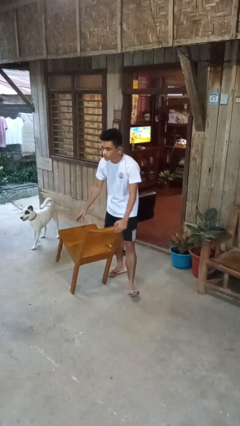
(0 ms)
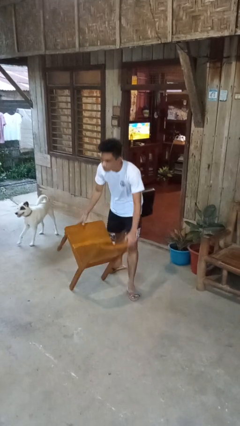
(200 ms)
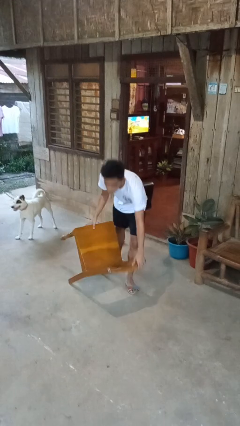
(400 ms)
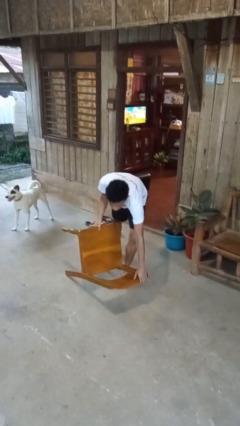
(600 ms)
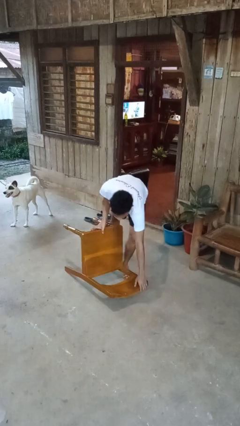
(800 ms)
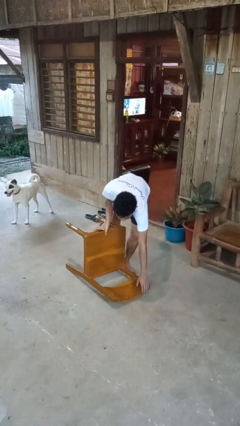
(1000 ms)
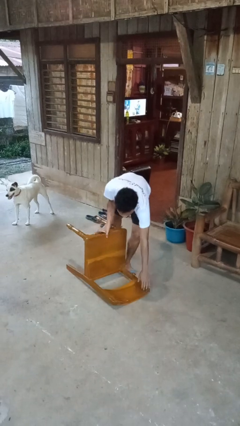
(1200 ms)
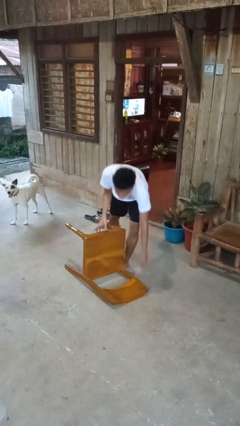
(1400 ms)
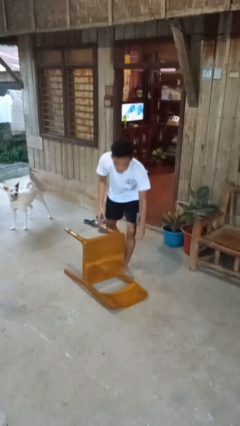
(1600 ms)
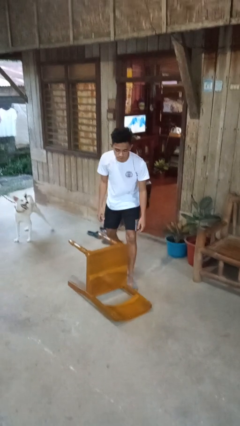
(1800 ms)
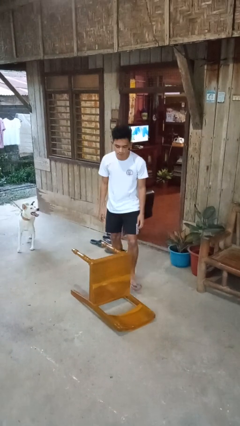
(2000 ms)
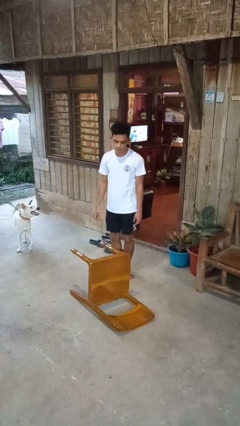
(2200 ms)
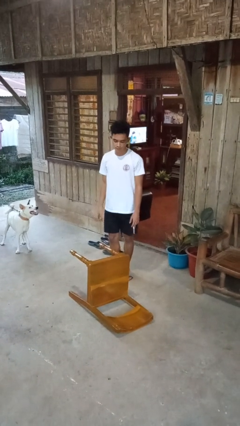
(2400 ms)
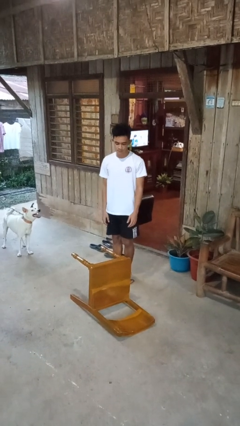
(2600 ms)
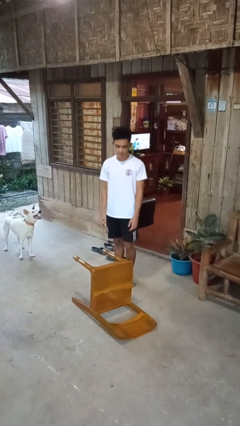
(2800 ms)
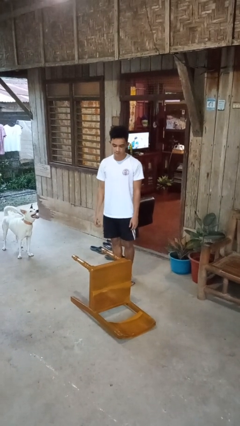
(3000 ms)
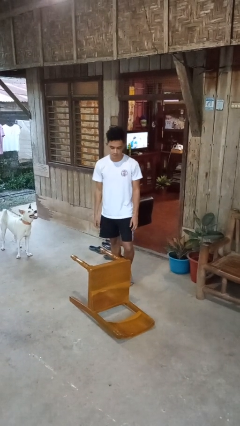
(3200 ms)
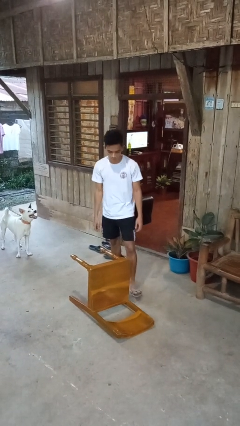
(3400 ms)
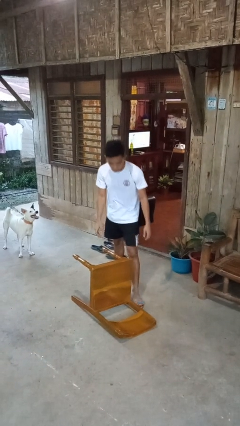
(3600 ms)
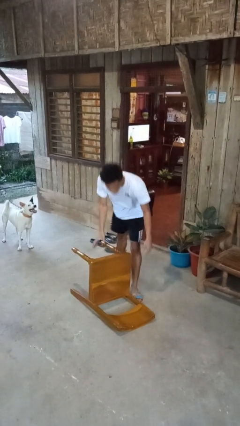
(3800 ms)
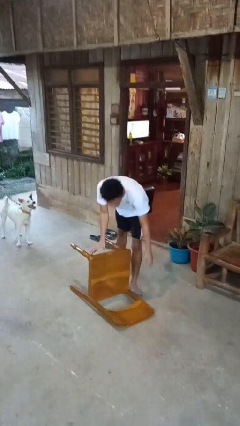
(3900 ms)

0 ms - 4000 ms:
person knocks over furniture

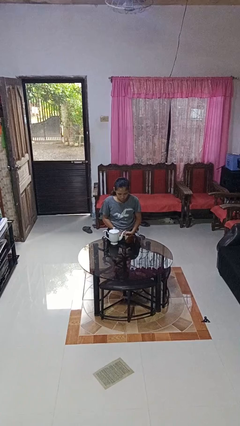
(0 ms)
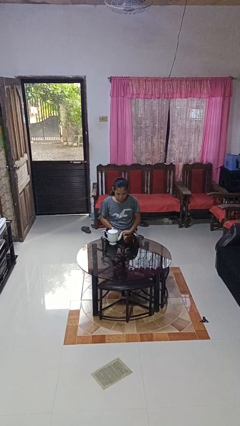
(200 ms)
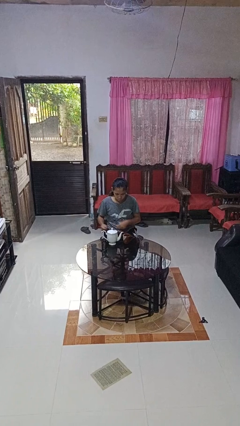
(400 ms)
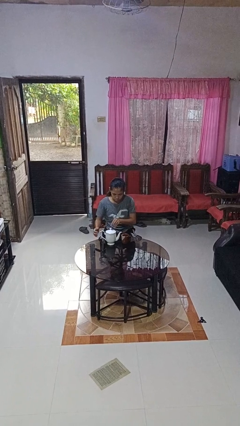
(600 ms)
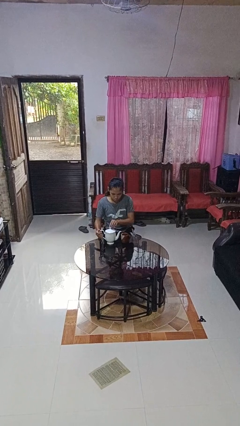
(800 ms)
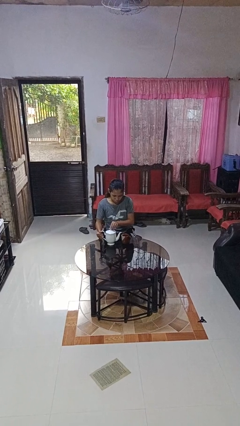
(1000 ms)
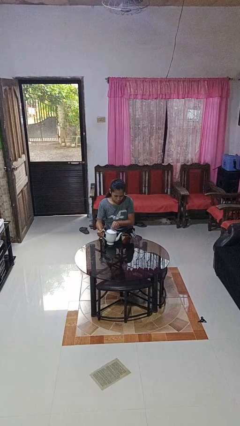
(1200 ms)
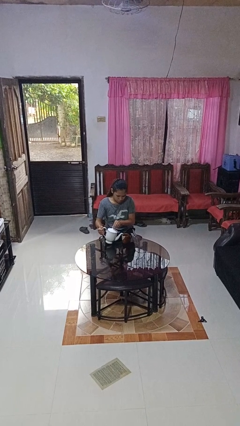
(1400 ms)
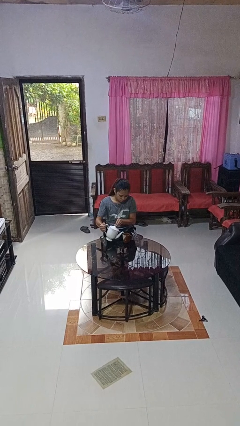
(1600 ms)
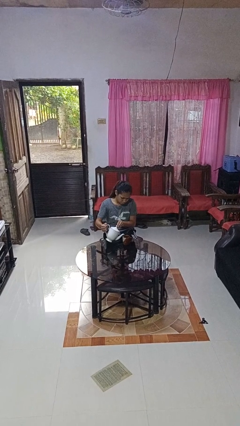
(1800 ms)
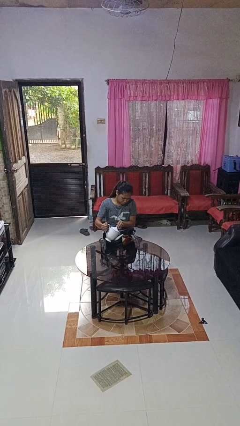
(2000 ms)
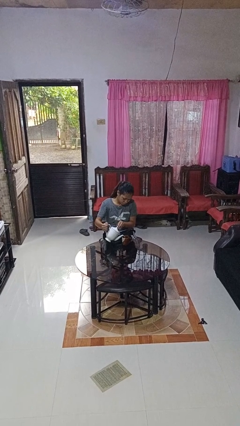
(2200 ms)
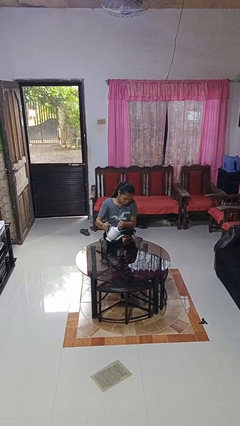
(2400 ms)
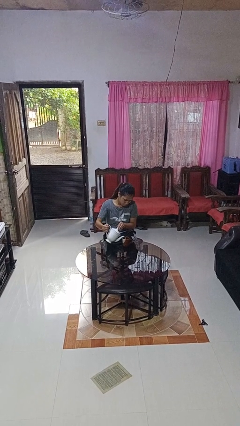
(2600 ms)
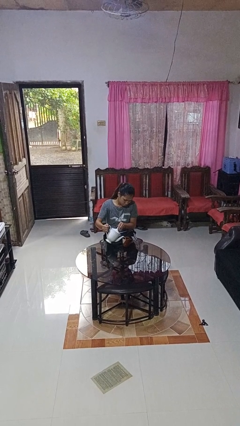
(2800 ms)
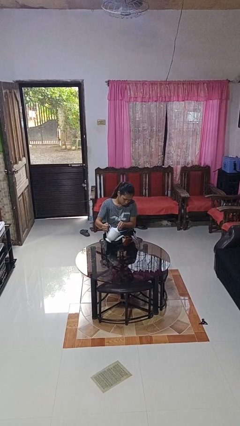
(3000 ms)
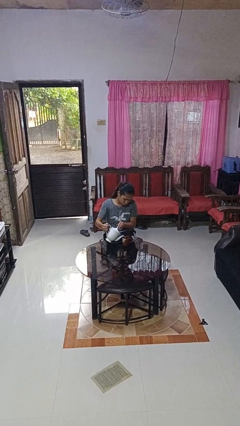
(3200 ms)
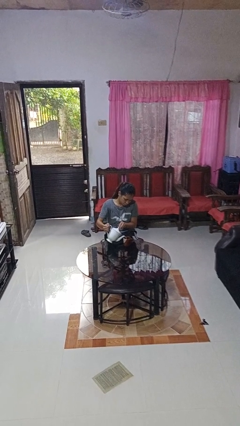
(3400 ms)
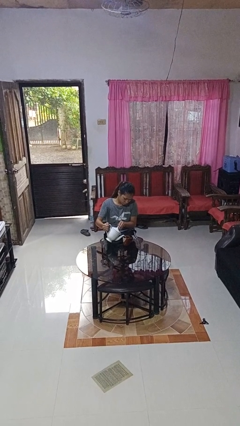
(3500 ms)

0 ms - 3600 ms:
person pours coffee into mug

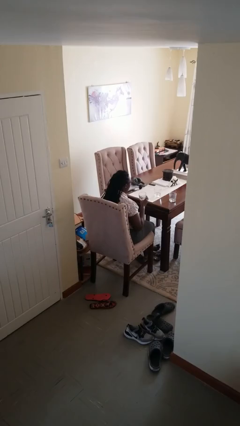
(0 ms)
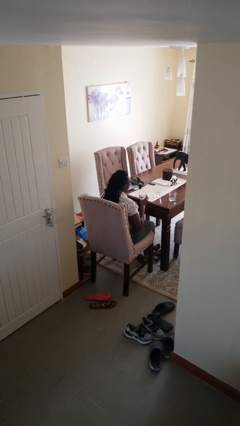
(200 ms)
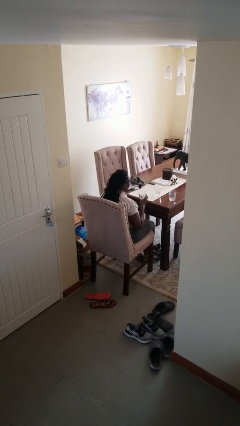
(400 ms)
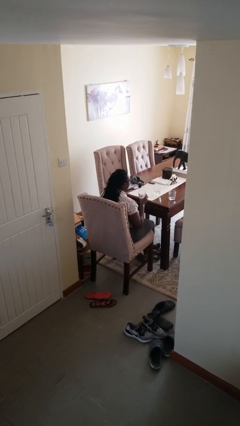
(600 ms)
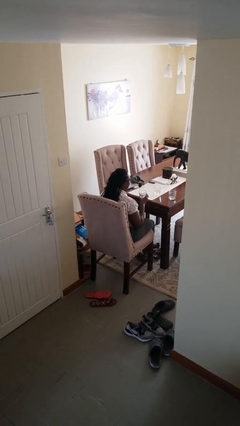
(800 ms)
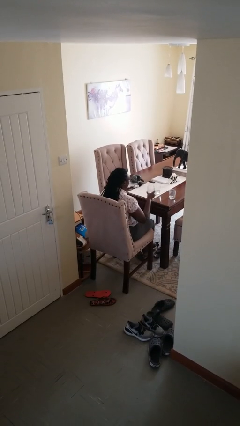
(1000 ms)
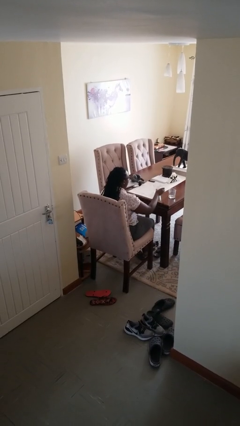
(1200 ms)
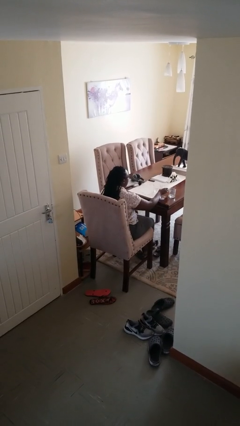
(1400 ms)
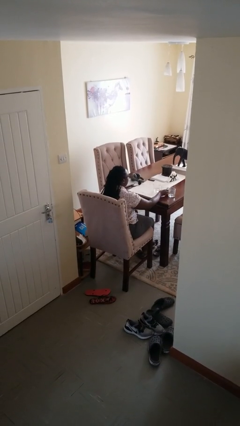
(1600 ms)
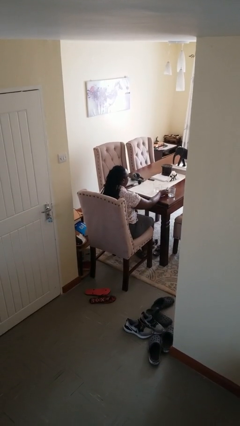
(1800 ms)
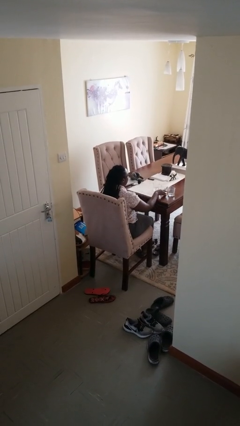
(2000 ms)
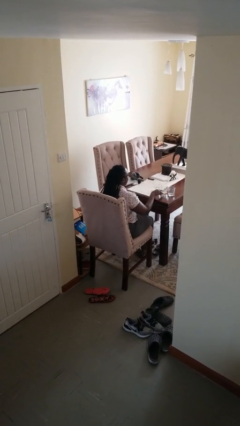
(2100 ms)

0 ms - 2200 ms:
person puts down object on table

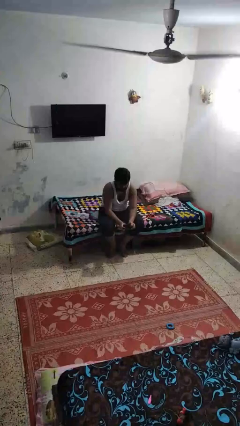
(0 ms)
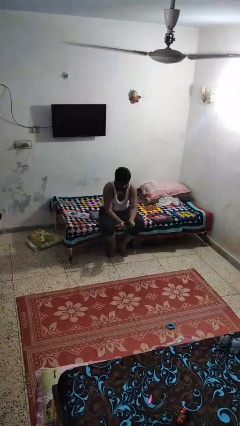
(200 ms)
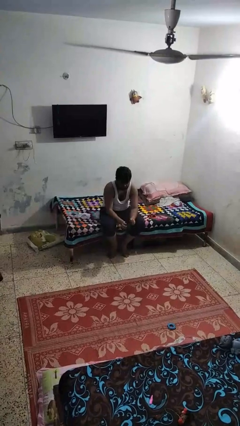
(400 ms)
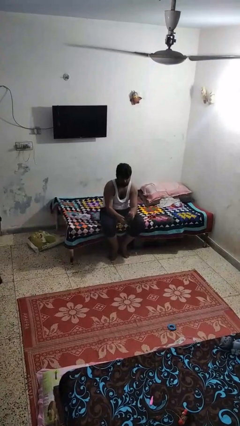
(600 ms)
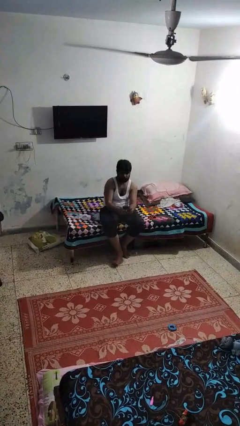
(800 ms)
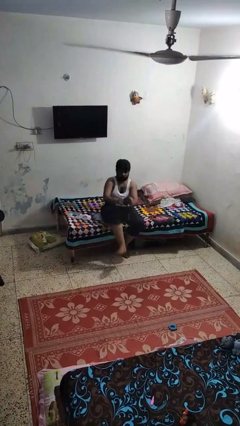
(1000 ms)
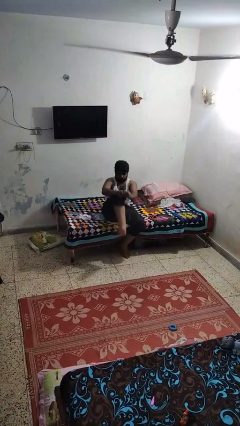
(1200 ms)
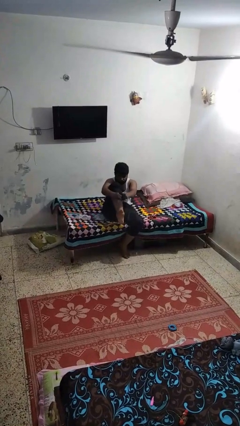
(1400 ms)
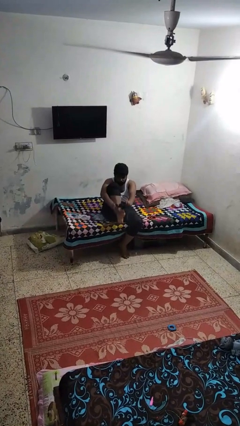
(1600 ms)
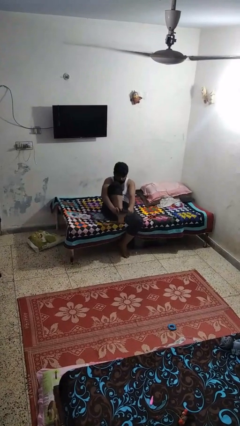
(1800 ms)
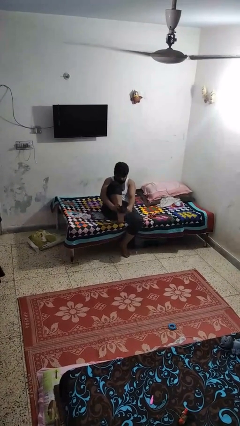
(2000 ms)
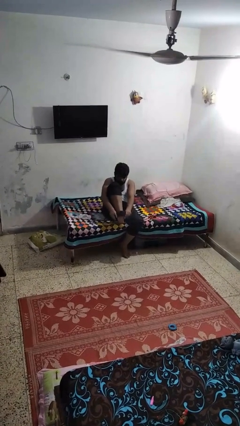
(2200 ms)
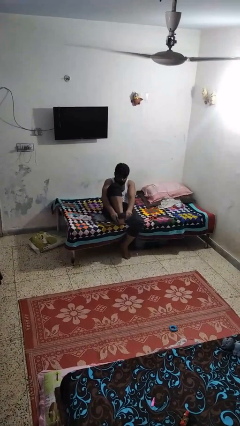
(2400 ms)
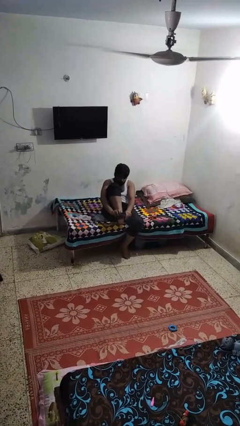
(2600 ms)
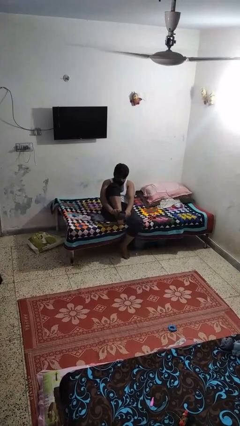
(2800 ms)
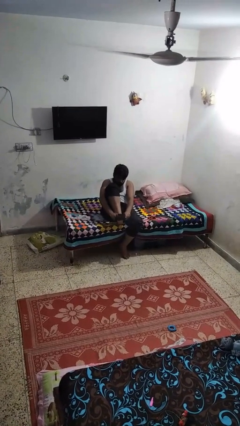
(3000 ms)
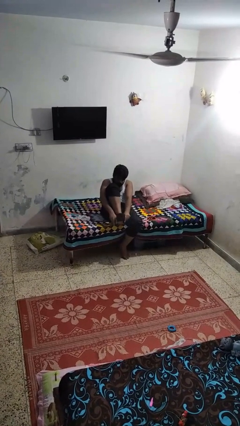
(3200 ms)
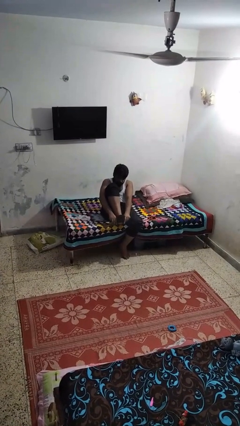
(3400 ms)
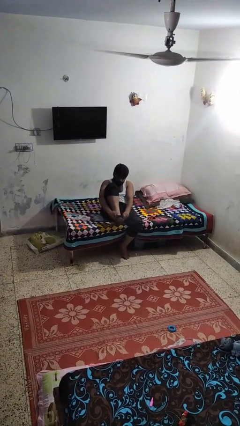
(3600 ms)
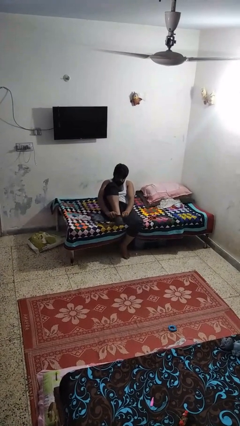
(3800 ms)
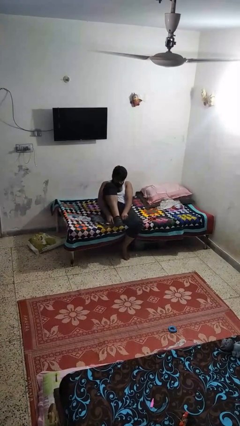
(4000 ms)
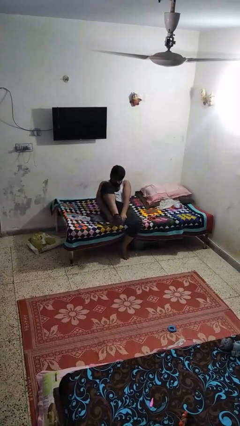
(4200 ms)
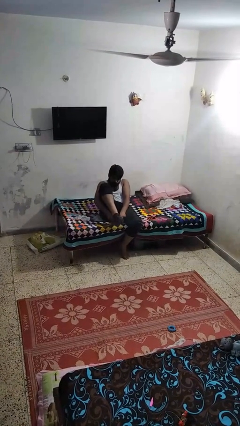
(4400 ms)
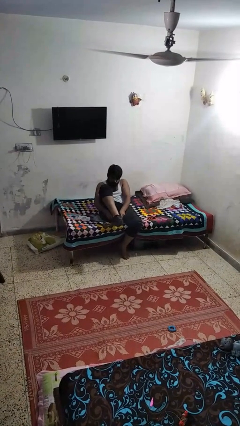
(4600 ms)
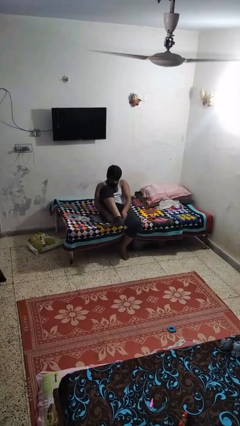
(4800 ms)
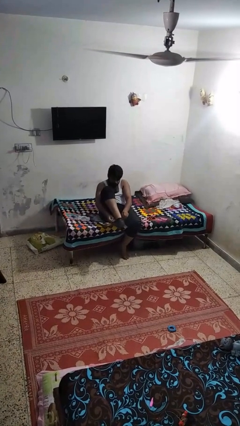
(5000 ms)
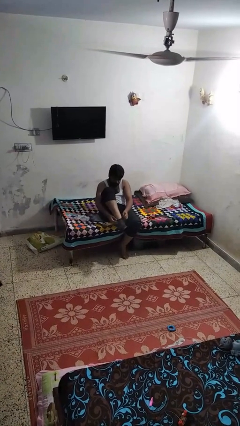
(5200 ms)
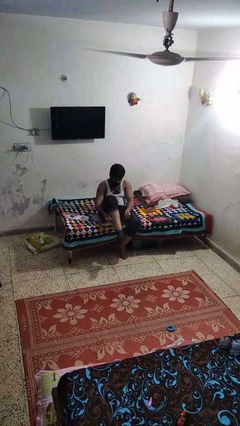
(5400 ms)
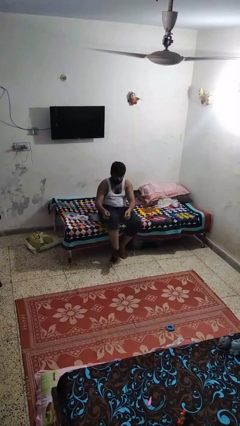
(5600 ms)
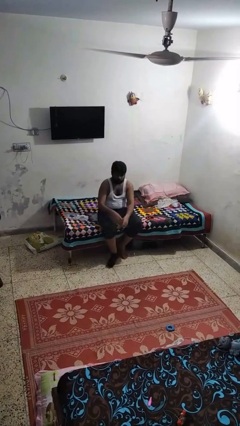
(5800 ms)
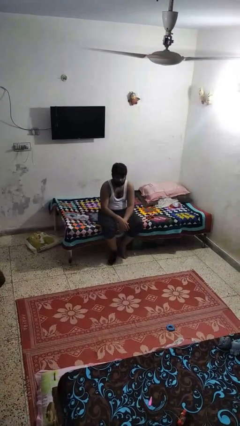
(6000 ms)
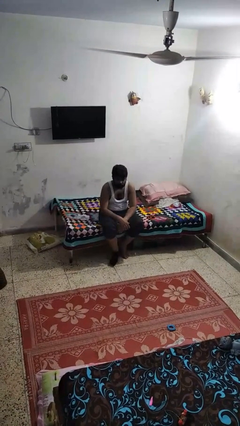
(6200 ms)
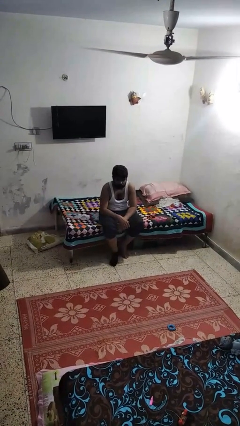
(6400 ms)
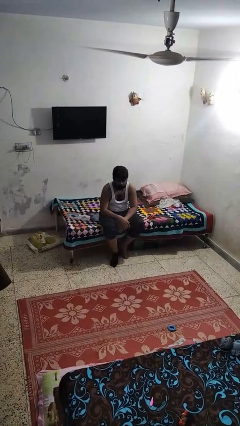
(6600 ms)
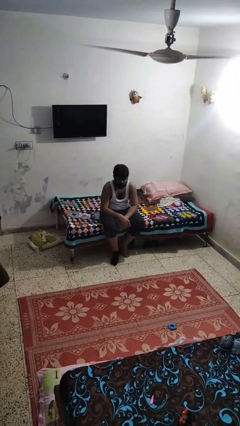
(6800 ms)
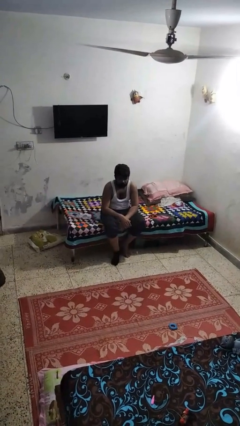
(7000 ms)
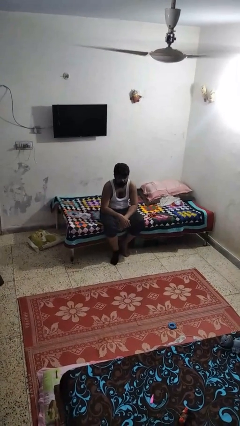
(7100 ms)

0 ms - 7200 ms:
person puts on socks

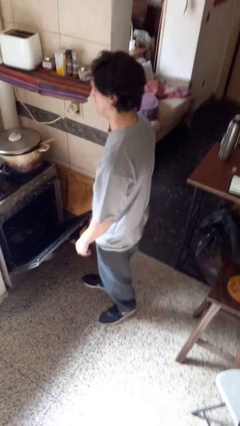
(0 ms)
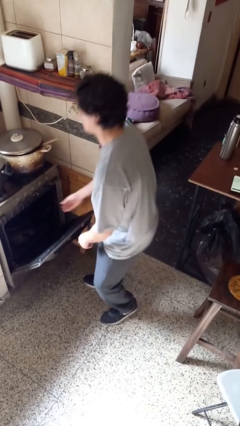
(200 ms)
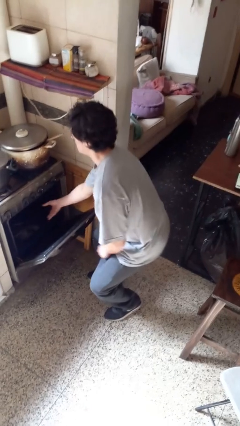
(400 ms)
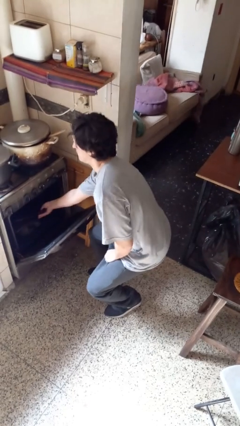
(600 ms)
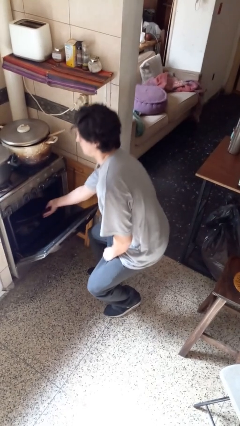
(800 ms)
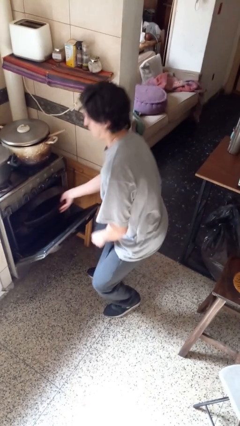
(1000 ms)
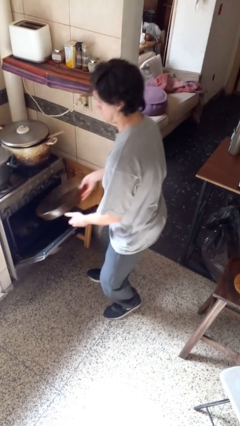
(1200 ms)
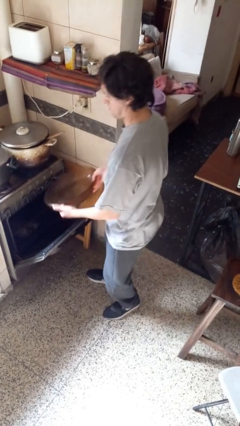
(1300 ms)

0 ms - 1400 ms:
person takes object from oven
